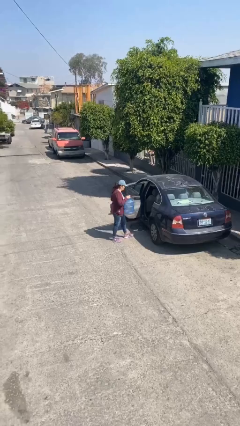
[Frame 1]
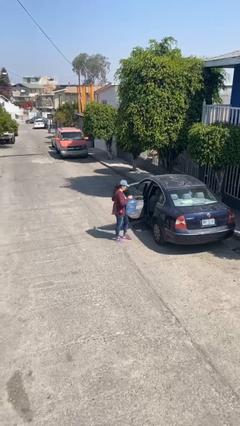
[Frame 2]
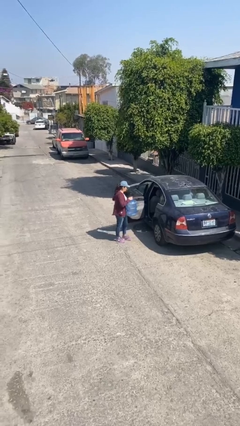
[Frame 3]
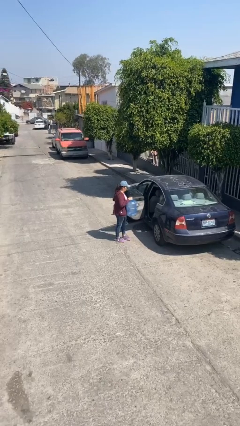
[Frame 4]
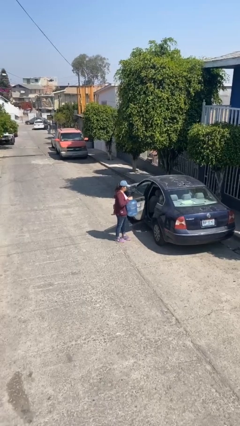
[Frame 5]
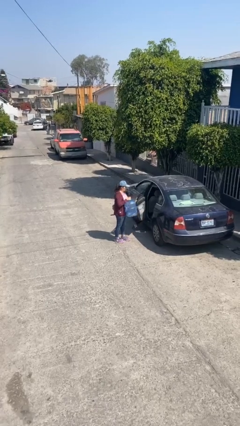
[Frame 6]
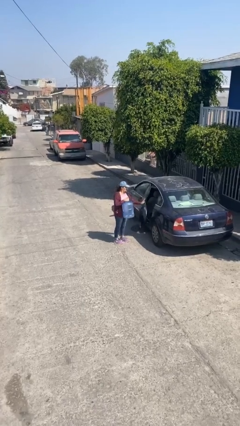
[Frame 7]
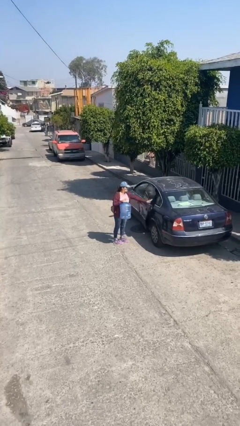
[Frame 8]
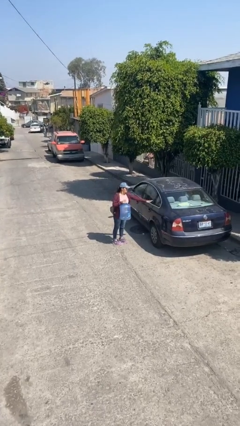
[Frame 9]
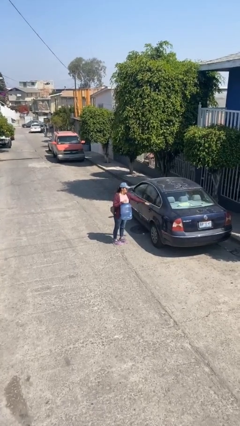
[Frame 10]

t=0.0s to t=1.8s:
person closes car door

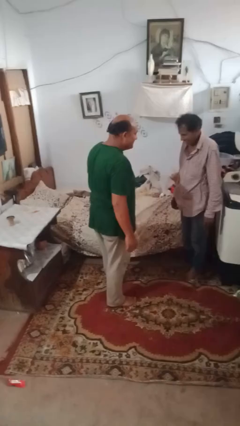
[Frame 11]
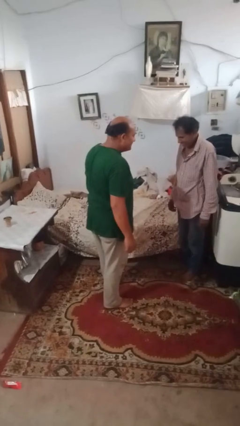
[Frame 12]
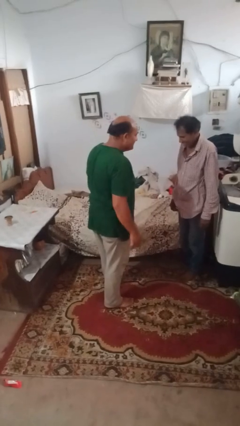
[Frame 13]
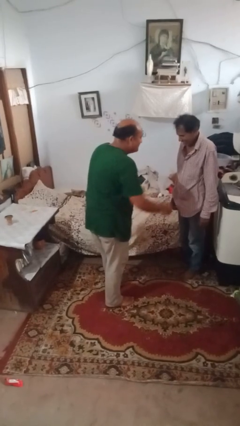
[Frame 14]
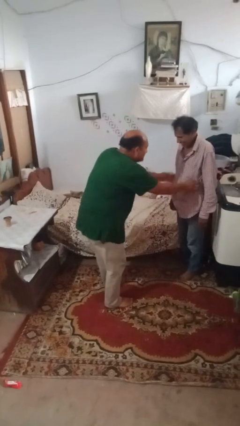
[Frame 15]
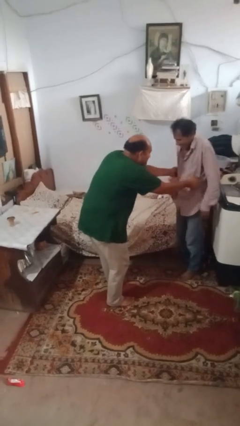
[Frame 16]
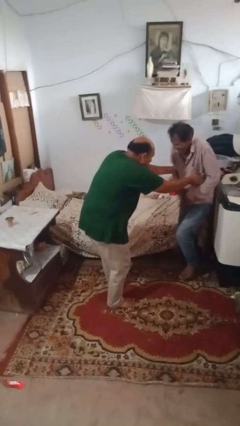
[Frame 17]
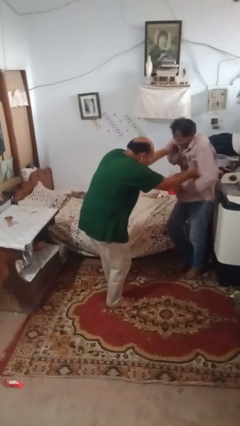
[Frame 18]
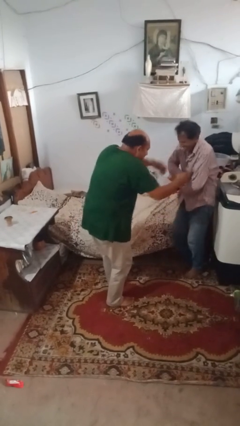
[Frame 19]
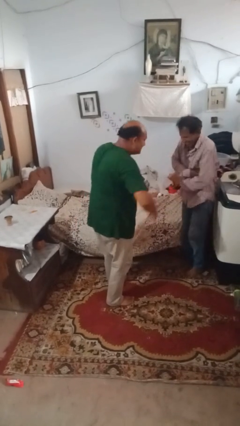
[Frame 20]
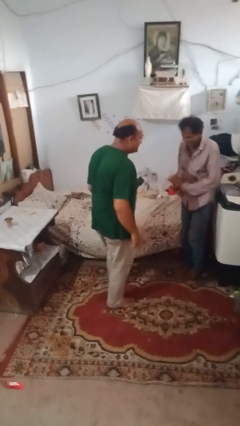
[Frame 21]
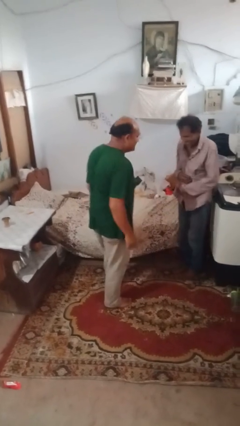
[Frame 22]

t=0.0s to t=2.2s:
person tickles person

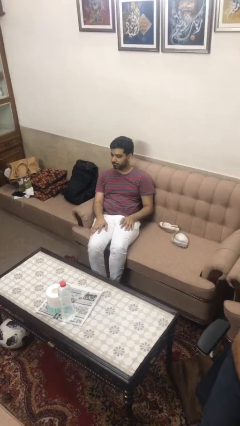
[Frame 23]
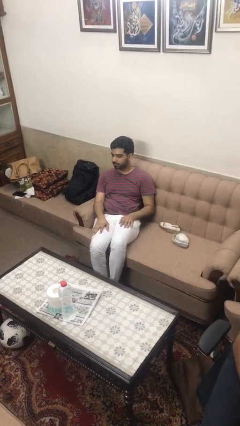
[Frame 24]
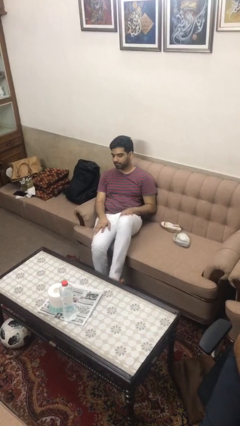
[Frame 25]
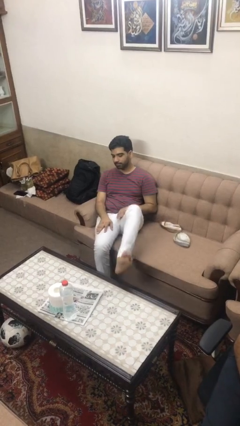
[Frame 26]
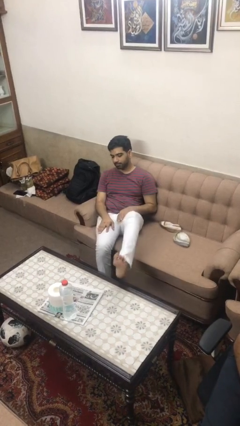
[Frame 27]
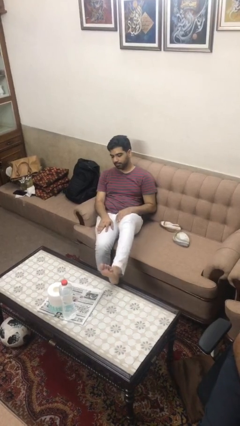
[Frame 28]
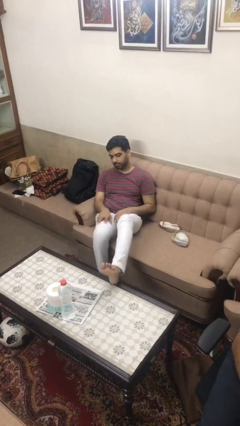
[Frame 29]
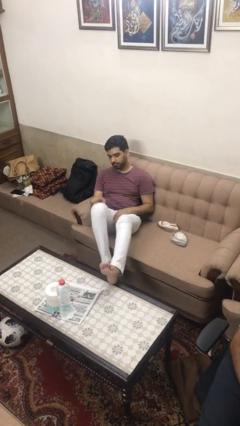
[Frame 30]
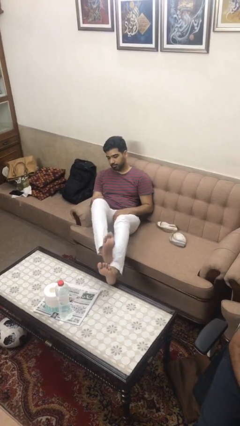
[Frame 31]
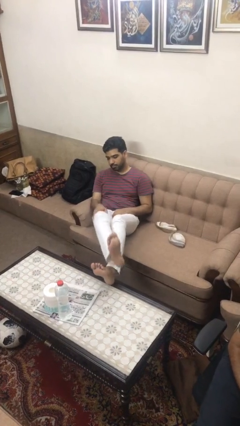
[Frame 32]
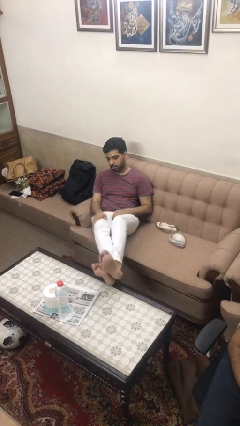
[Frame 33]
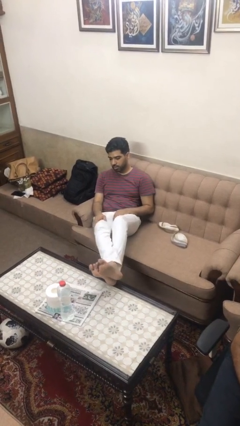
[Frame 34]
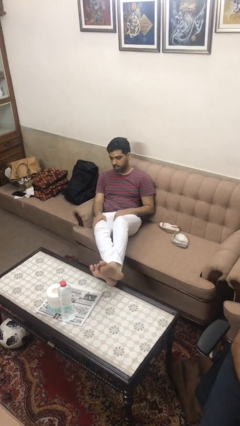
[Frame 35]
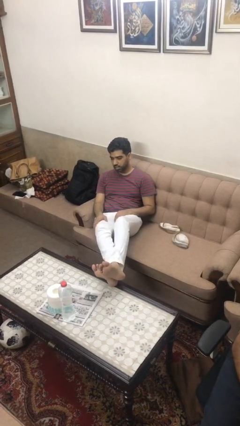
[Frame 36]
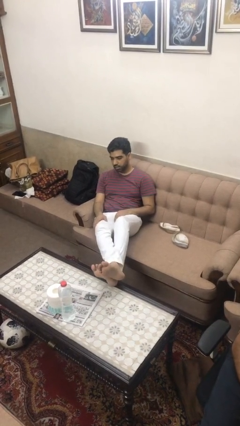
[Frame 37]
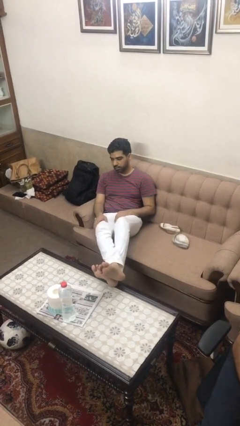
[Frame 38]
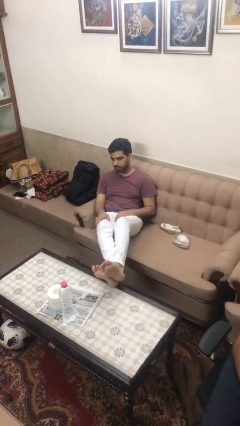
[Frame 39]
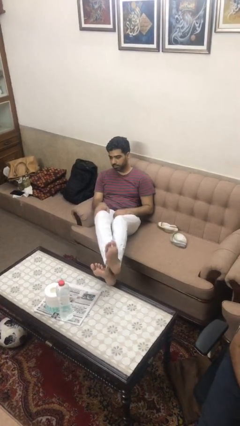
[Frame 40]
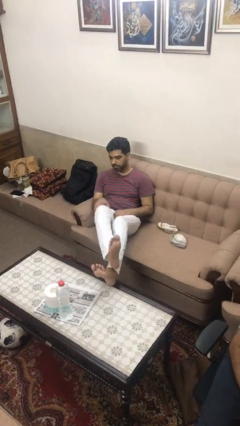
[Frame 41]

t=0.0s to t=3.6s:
person puts feet up

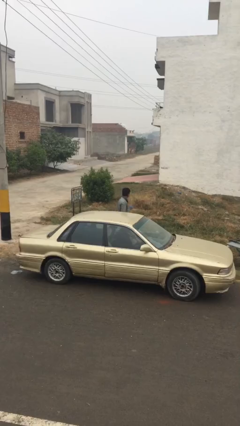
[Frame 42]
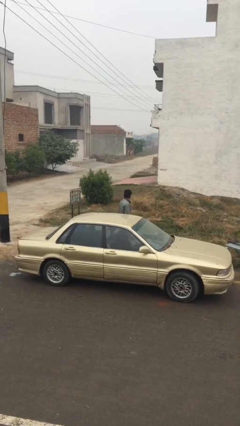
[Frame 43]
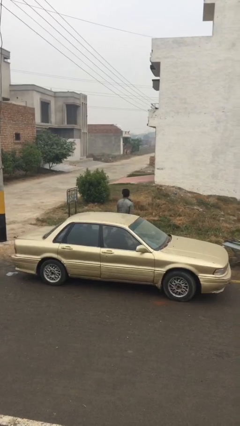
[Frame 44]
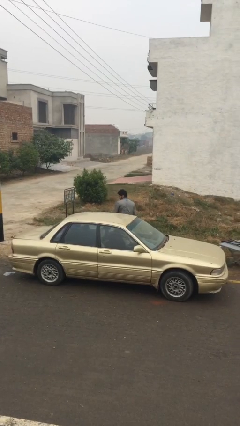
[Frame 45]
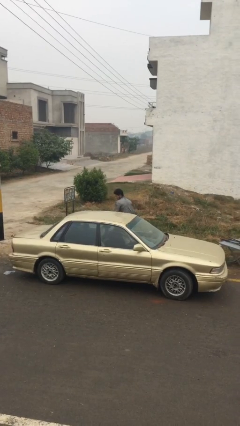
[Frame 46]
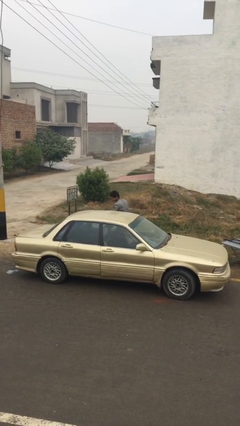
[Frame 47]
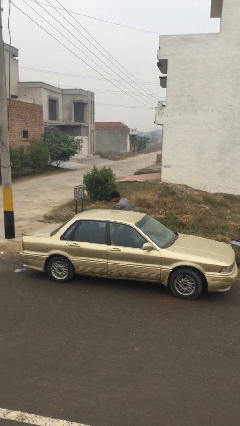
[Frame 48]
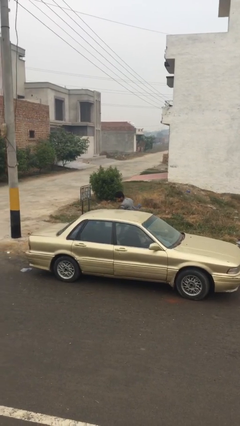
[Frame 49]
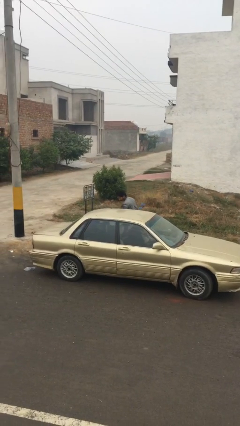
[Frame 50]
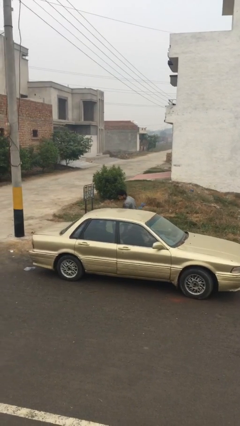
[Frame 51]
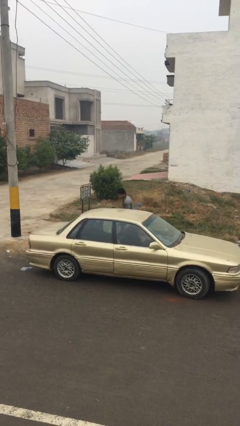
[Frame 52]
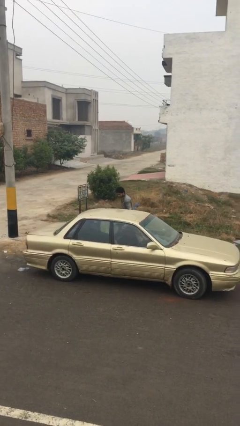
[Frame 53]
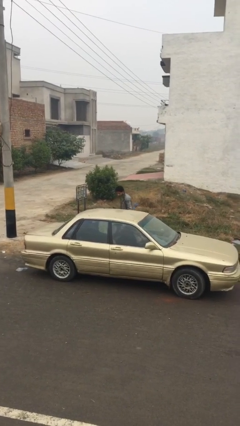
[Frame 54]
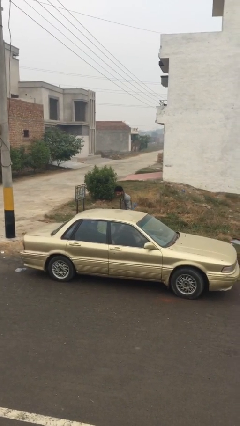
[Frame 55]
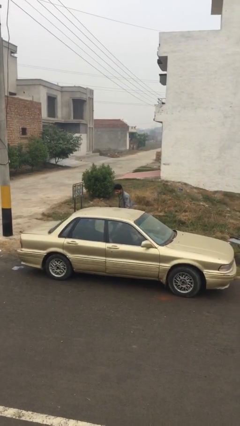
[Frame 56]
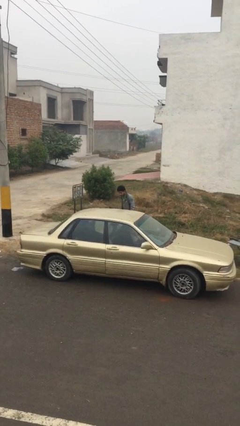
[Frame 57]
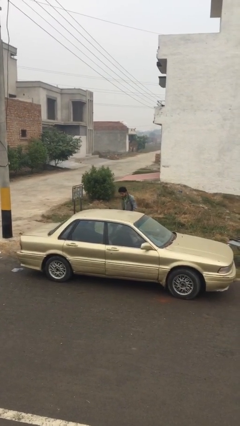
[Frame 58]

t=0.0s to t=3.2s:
person opens car door

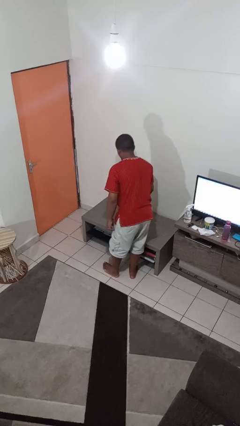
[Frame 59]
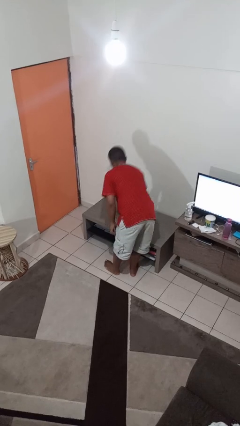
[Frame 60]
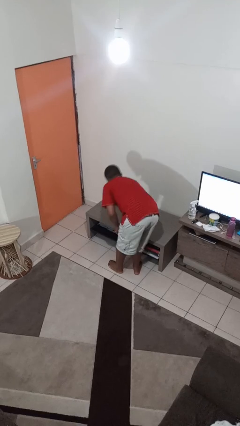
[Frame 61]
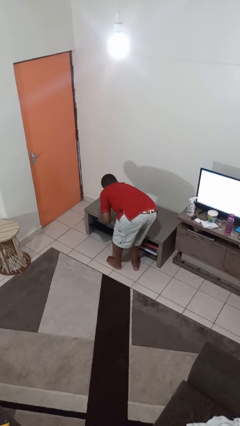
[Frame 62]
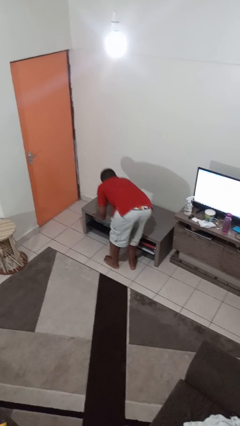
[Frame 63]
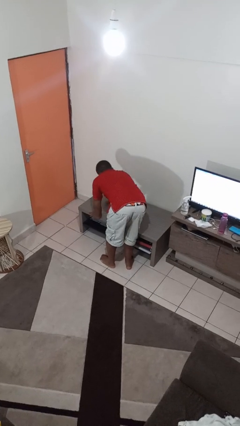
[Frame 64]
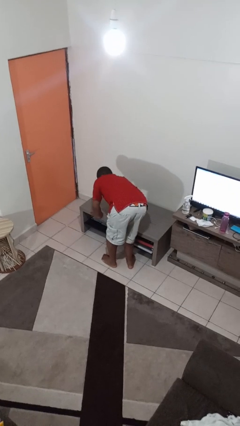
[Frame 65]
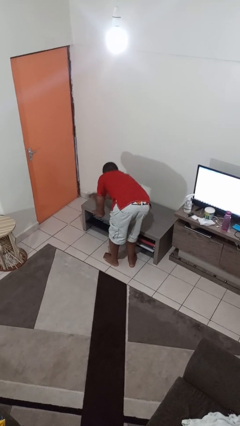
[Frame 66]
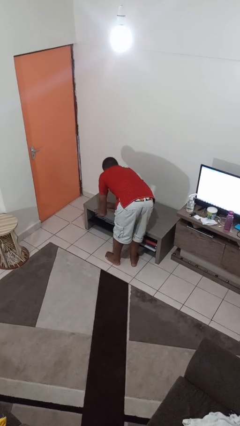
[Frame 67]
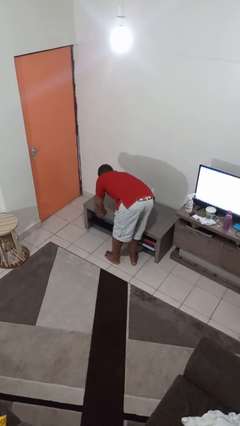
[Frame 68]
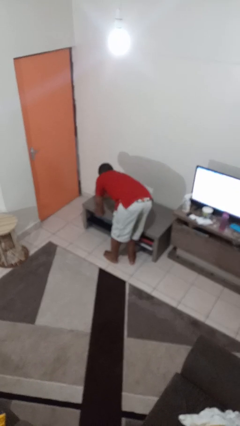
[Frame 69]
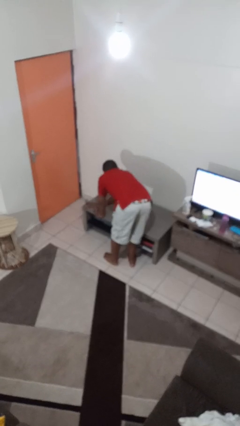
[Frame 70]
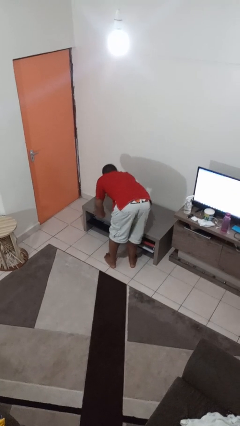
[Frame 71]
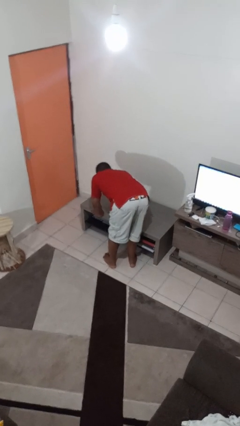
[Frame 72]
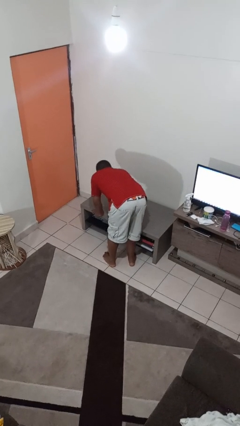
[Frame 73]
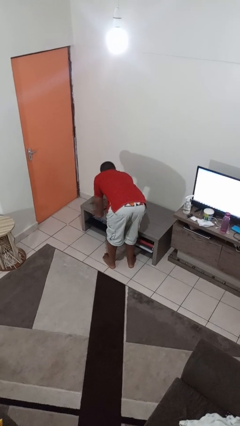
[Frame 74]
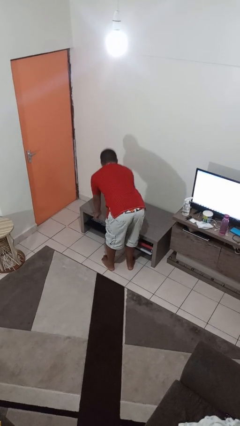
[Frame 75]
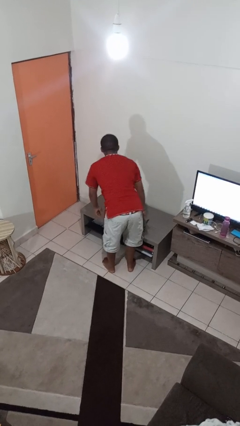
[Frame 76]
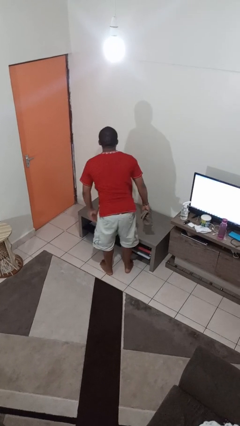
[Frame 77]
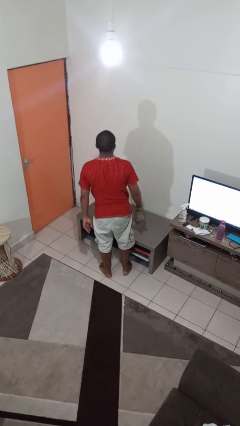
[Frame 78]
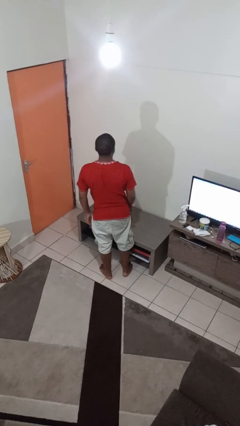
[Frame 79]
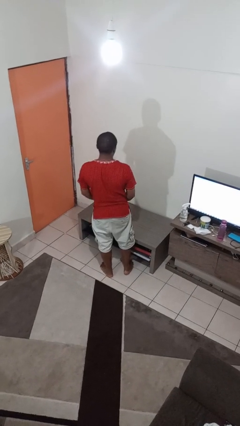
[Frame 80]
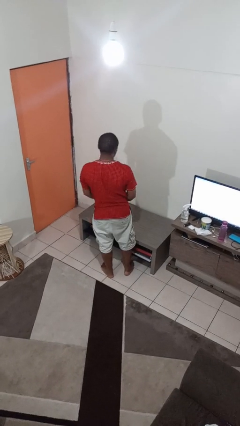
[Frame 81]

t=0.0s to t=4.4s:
person cleans table with rag

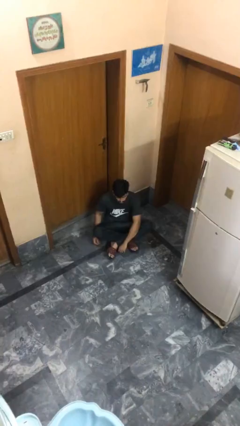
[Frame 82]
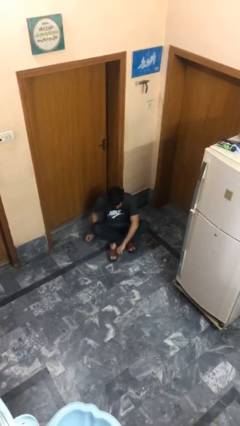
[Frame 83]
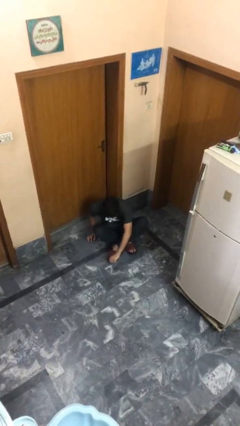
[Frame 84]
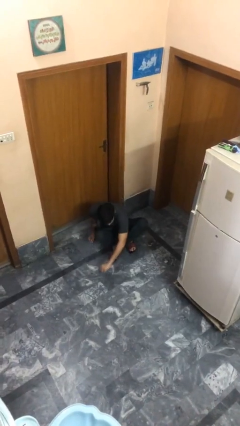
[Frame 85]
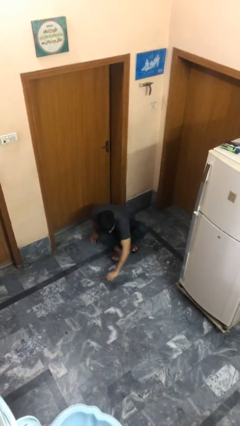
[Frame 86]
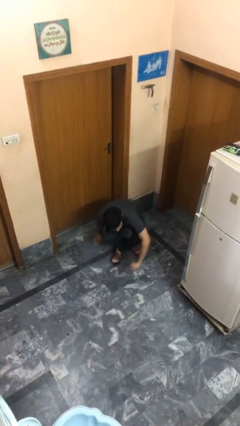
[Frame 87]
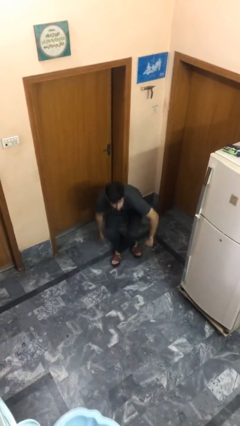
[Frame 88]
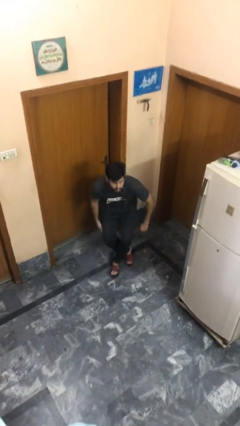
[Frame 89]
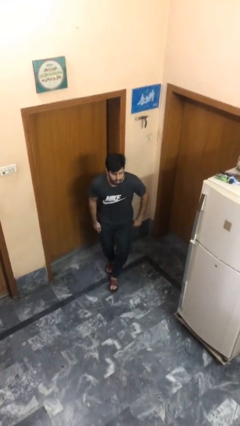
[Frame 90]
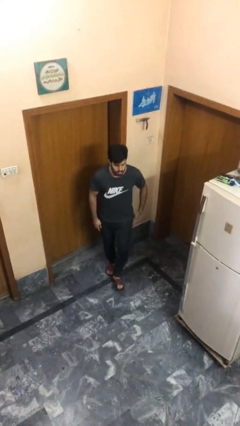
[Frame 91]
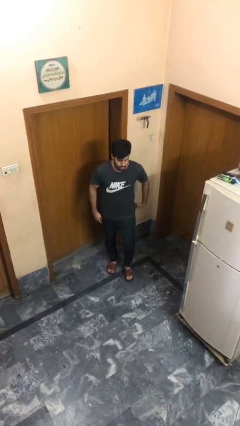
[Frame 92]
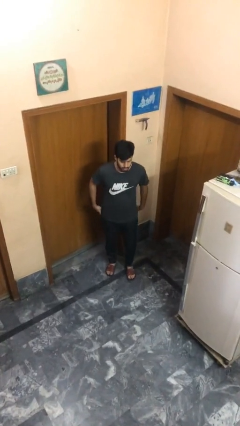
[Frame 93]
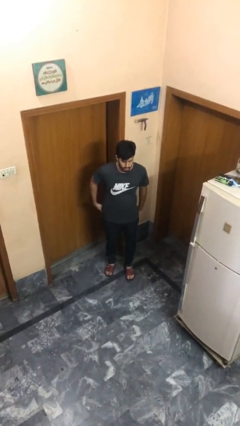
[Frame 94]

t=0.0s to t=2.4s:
person stands up from floor
